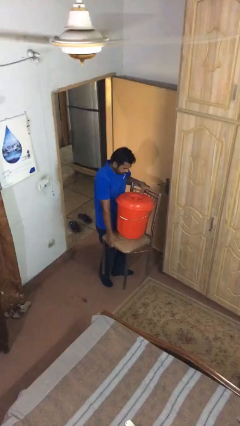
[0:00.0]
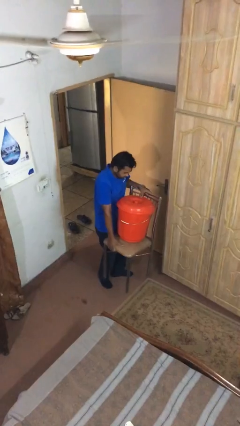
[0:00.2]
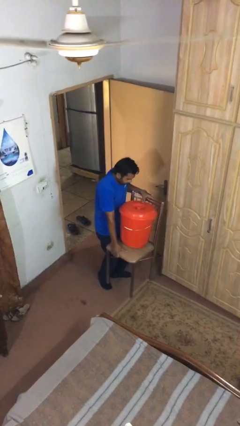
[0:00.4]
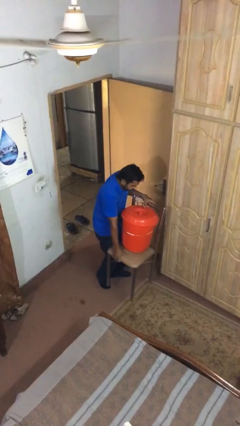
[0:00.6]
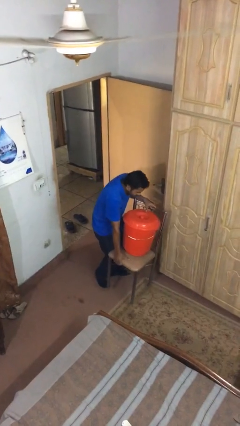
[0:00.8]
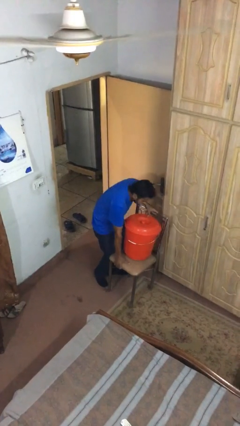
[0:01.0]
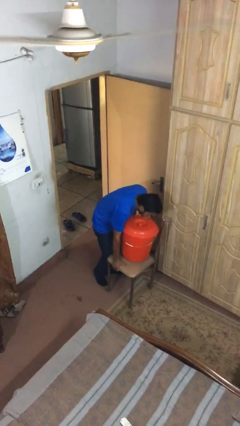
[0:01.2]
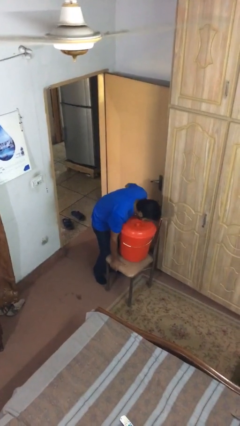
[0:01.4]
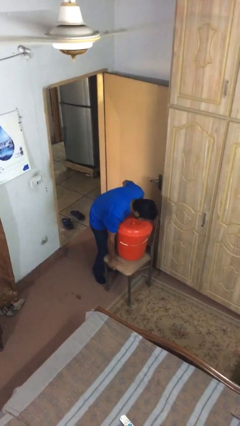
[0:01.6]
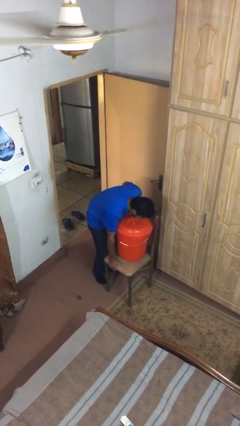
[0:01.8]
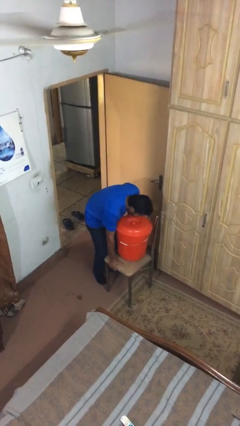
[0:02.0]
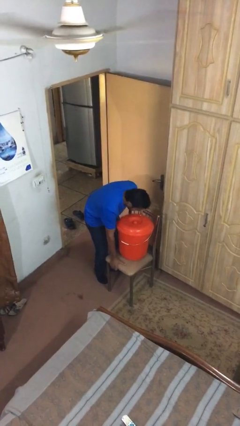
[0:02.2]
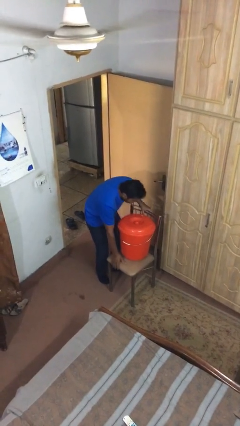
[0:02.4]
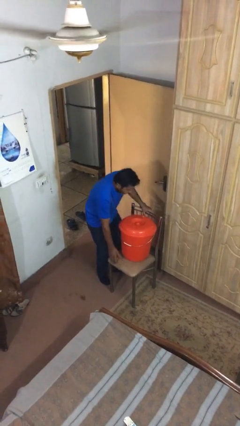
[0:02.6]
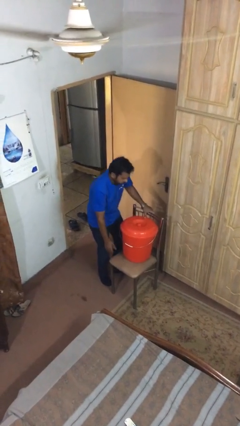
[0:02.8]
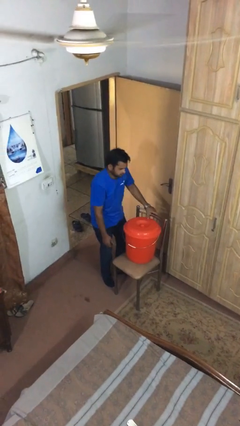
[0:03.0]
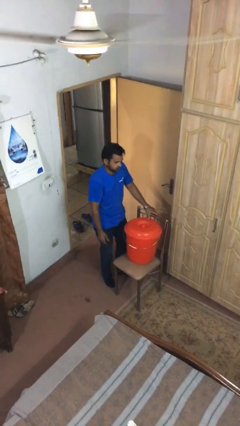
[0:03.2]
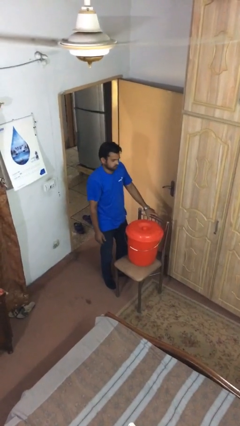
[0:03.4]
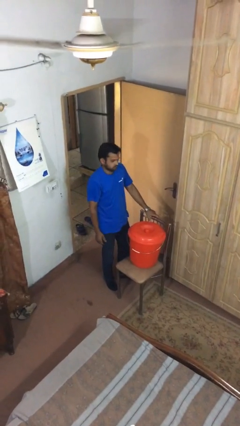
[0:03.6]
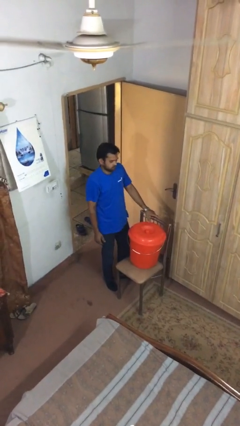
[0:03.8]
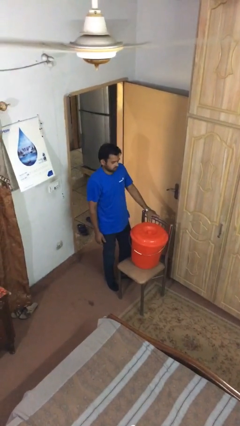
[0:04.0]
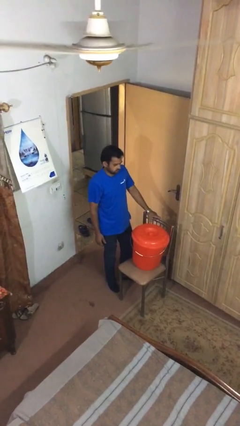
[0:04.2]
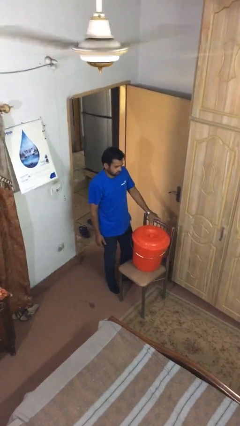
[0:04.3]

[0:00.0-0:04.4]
person puts down object on floor

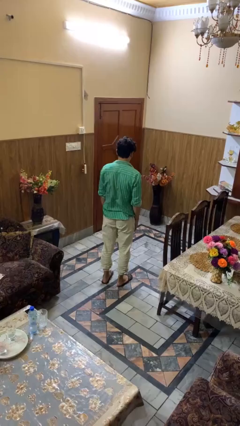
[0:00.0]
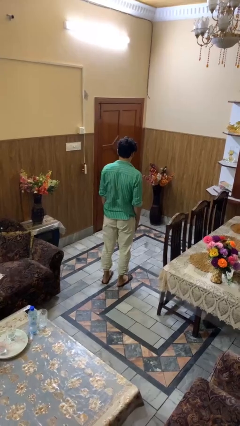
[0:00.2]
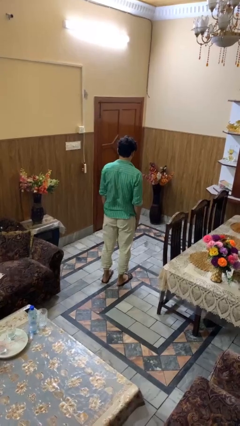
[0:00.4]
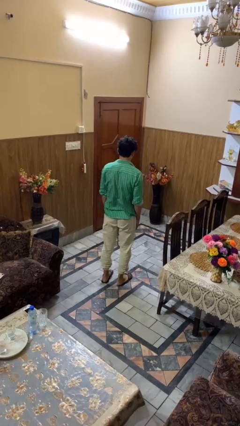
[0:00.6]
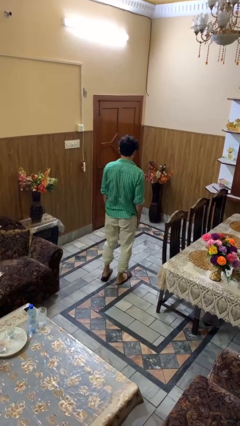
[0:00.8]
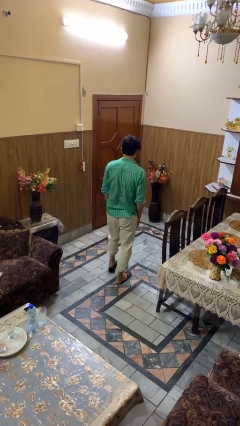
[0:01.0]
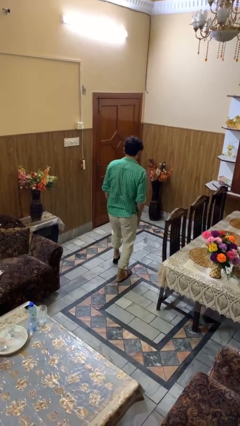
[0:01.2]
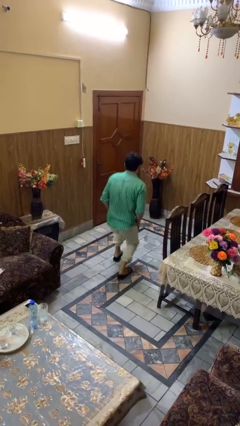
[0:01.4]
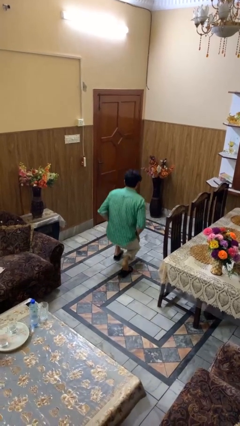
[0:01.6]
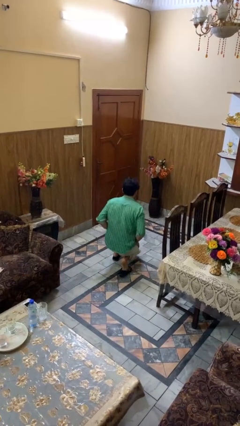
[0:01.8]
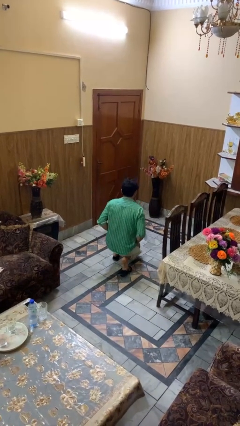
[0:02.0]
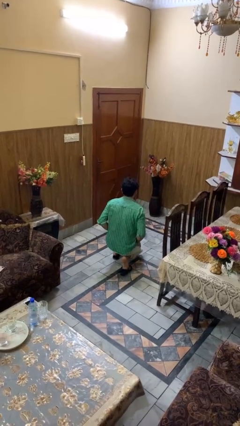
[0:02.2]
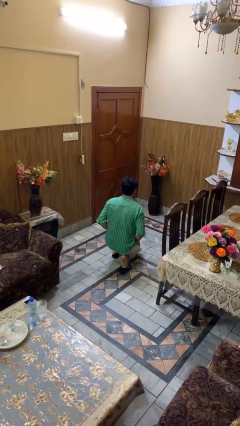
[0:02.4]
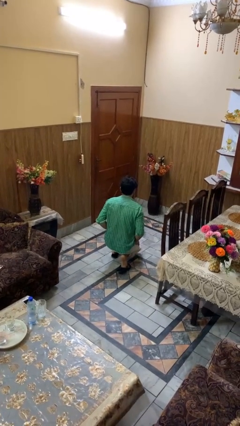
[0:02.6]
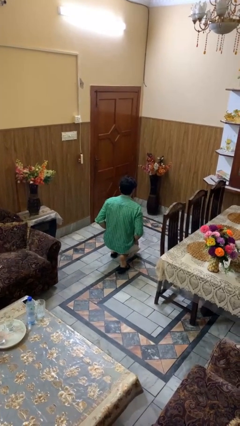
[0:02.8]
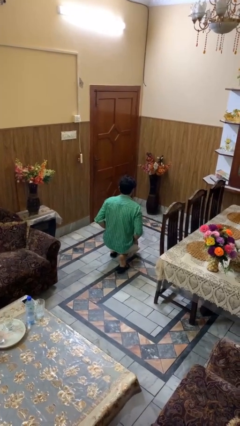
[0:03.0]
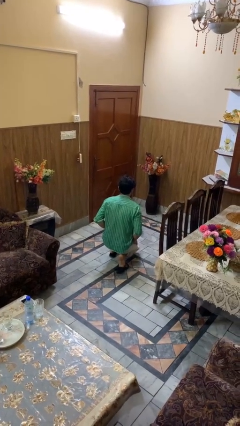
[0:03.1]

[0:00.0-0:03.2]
person kneels

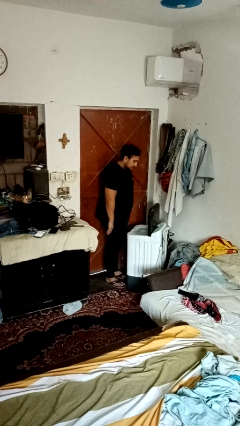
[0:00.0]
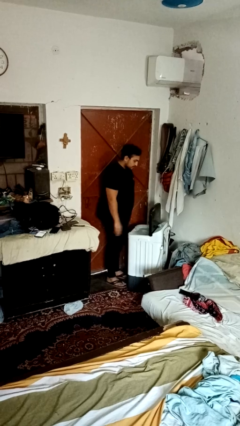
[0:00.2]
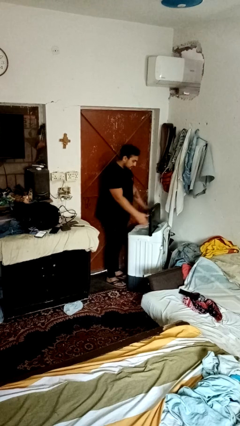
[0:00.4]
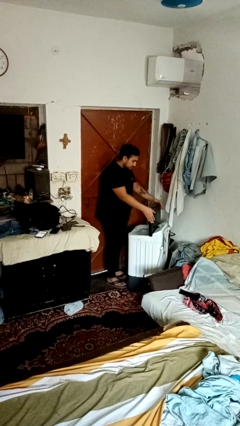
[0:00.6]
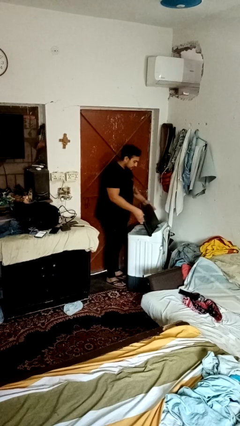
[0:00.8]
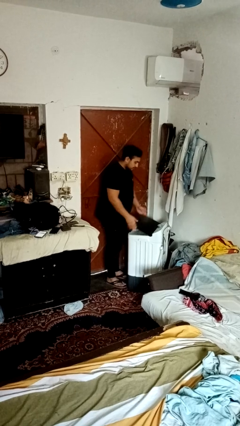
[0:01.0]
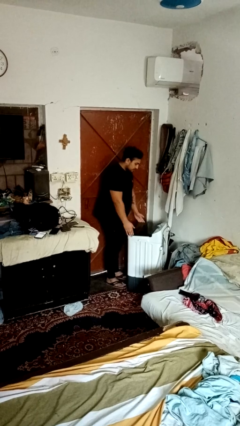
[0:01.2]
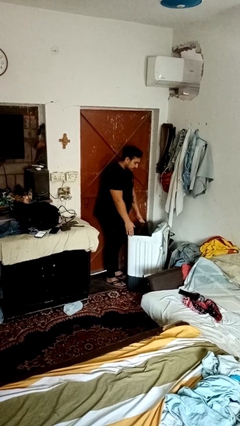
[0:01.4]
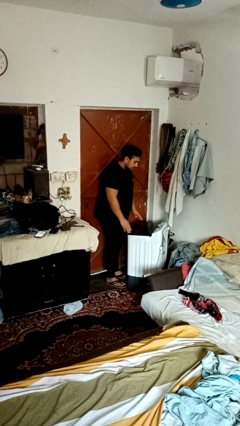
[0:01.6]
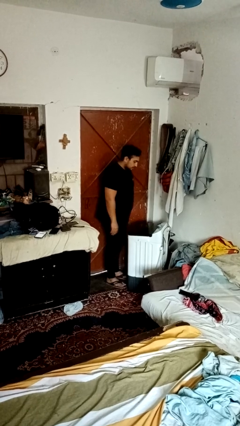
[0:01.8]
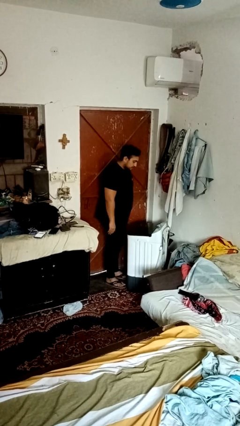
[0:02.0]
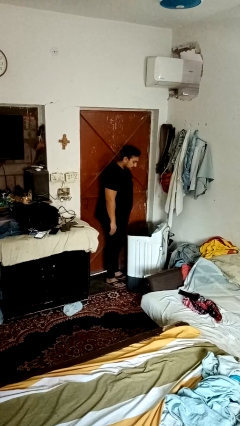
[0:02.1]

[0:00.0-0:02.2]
person closes clothes washer

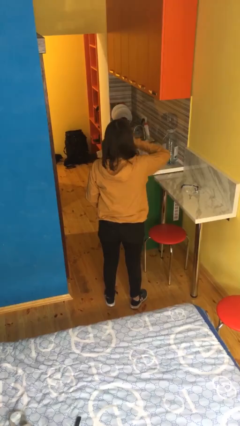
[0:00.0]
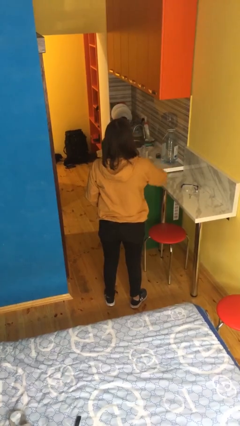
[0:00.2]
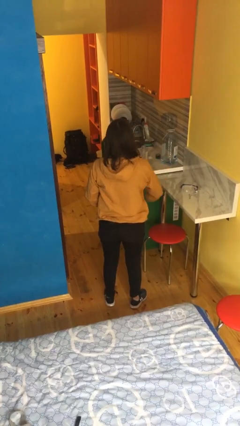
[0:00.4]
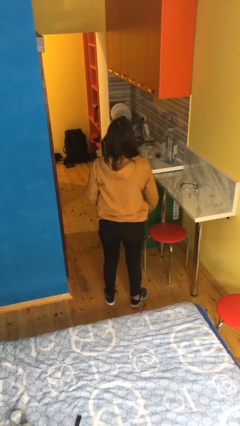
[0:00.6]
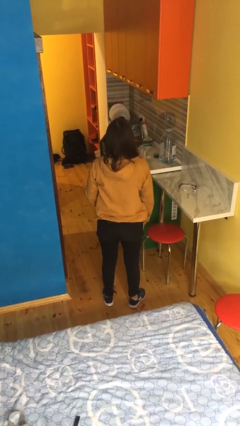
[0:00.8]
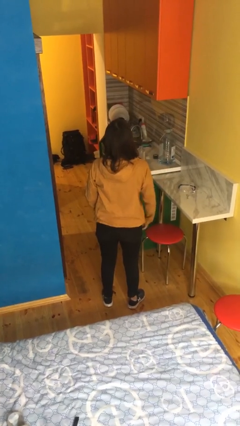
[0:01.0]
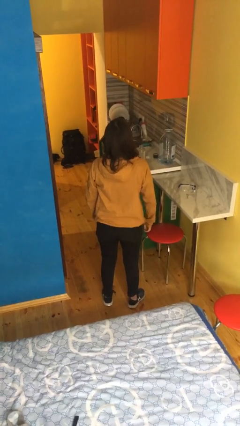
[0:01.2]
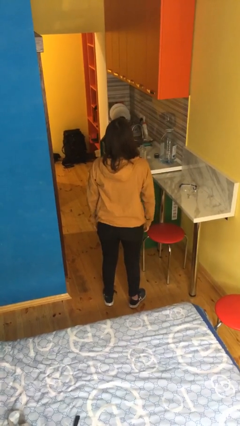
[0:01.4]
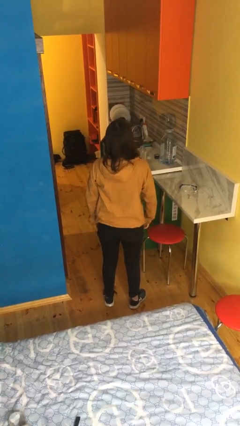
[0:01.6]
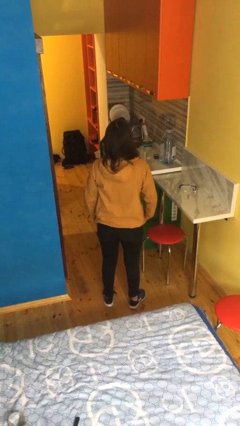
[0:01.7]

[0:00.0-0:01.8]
person unzips jacket

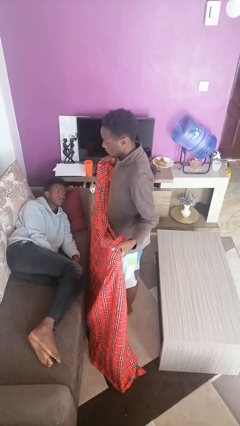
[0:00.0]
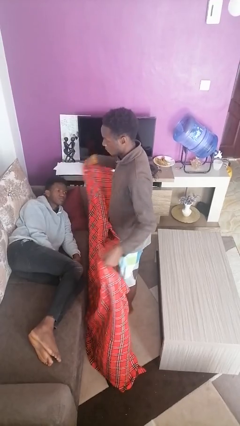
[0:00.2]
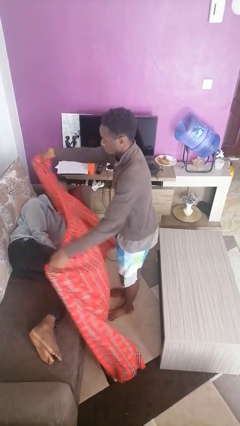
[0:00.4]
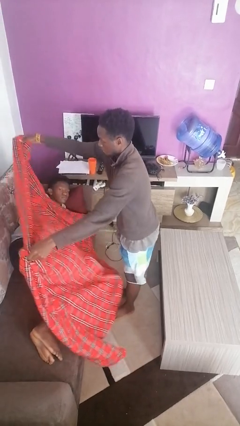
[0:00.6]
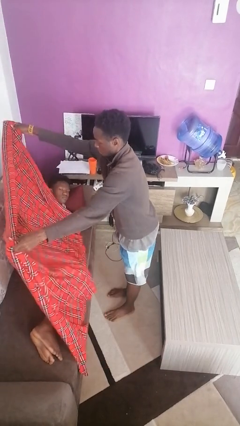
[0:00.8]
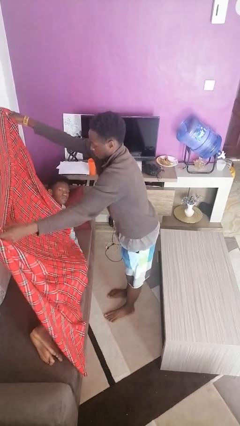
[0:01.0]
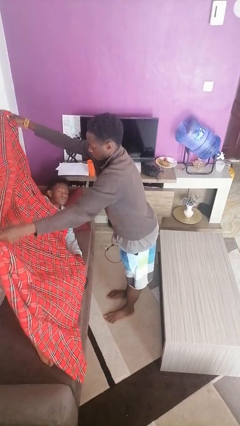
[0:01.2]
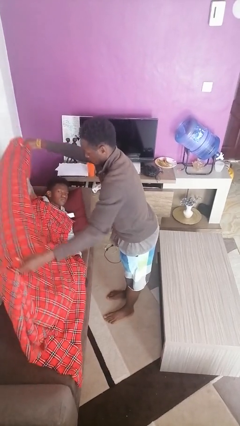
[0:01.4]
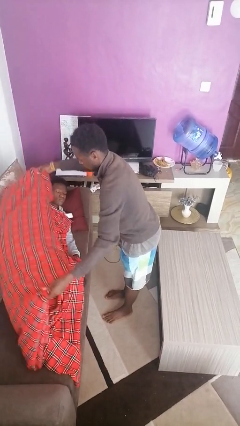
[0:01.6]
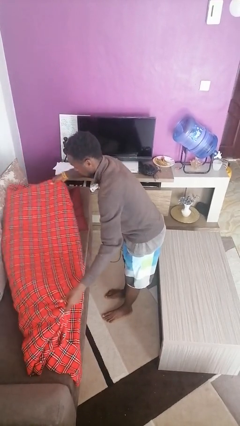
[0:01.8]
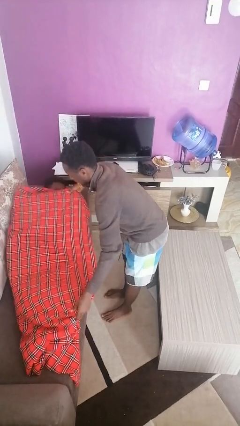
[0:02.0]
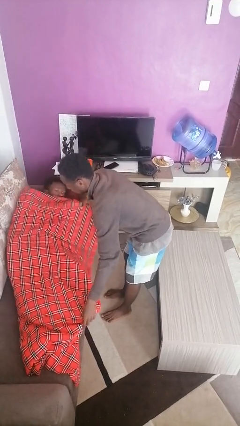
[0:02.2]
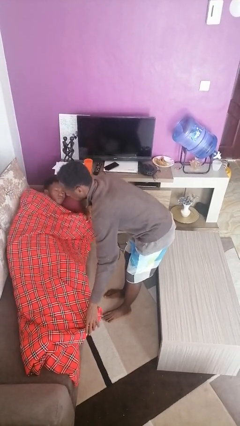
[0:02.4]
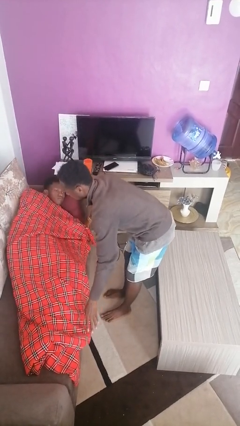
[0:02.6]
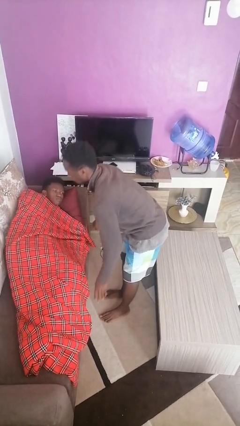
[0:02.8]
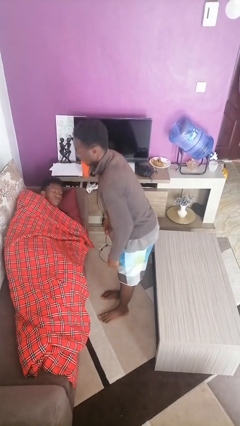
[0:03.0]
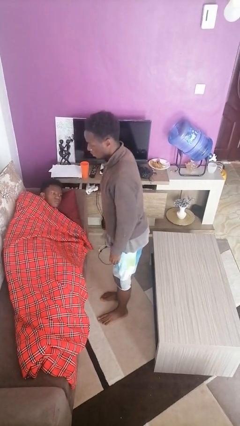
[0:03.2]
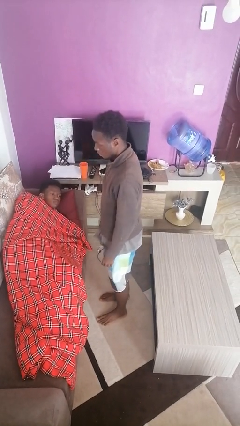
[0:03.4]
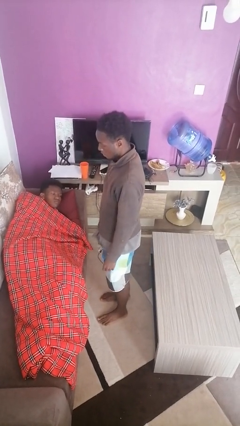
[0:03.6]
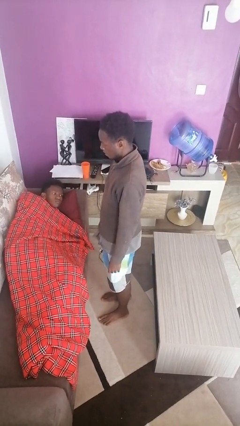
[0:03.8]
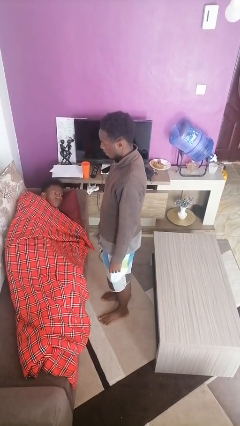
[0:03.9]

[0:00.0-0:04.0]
person covers friend with blanket

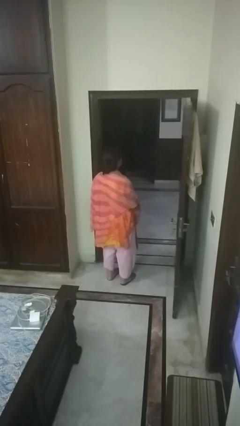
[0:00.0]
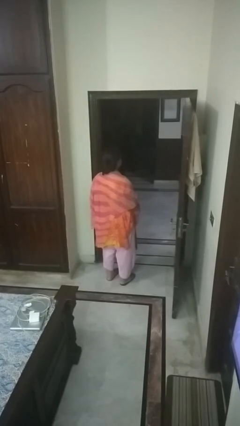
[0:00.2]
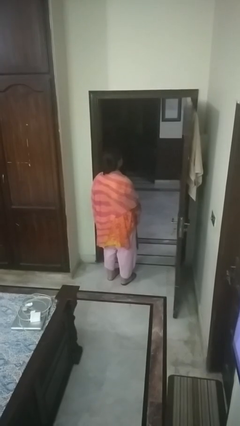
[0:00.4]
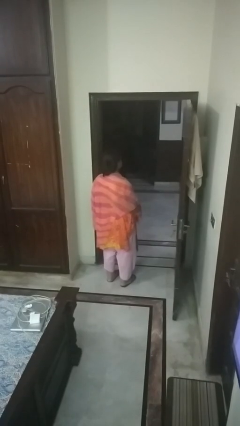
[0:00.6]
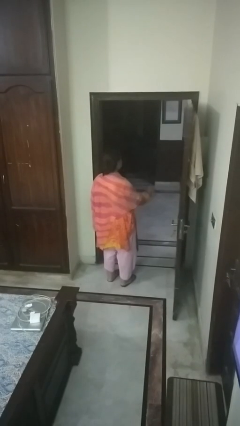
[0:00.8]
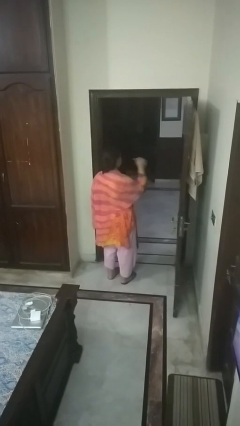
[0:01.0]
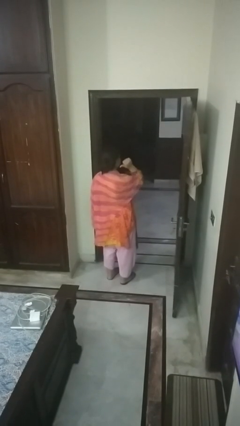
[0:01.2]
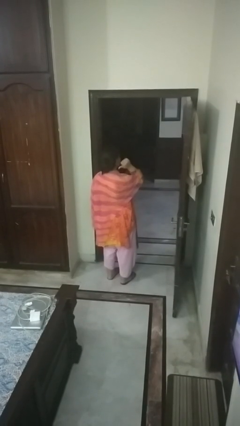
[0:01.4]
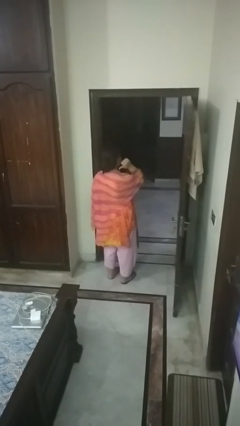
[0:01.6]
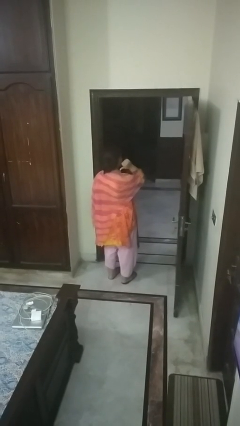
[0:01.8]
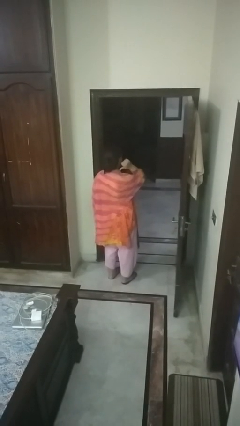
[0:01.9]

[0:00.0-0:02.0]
person gestures behind me
